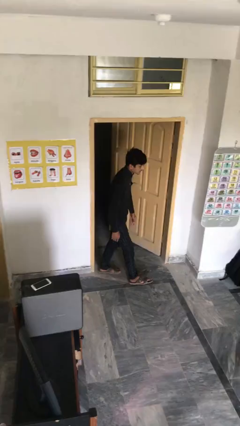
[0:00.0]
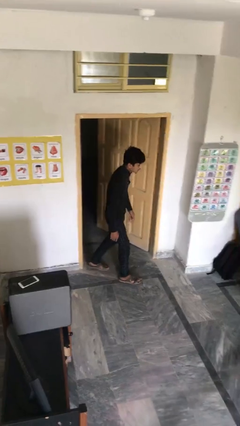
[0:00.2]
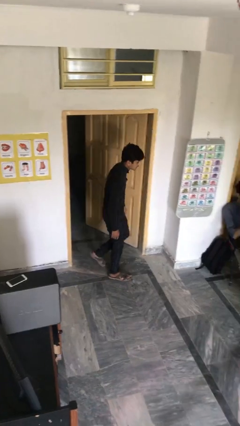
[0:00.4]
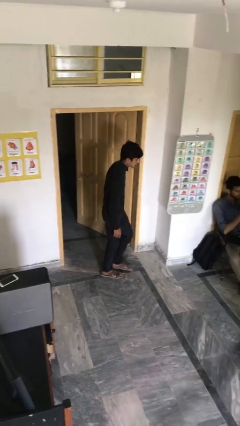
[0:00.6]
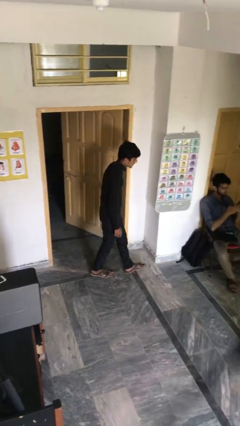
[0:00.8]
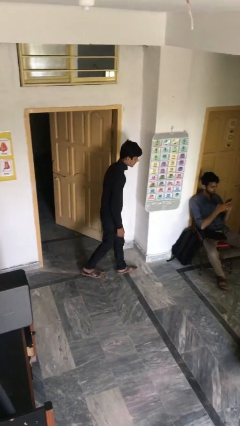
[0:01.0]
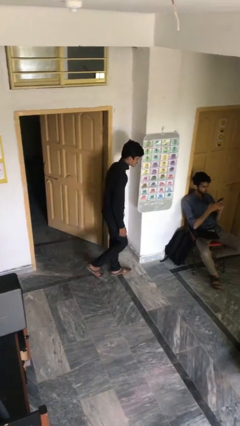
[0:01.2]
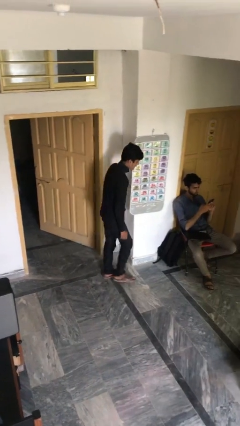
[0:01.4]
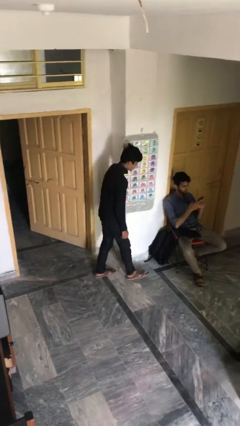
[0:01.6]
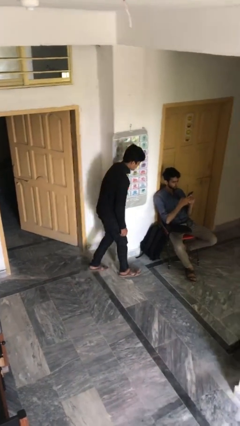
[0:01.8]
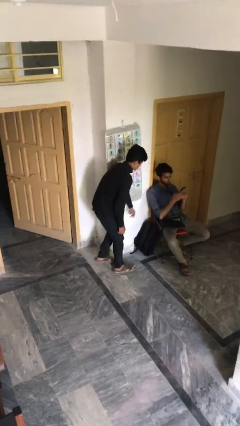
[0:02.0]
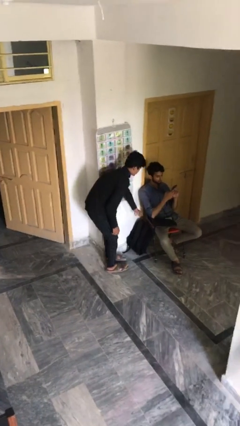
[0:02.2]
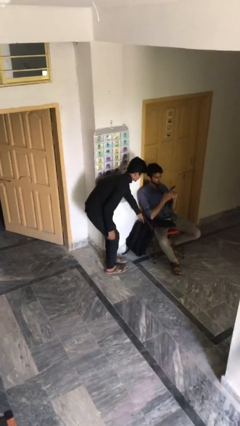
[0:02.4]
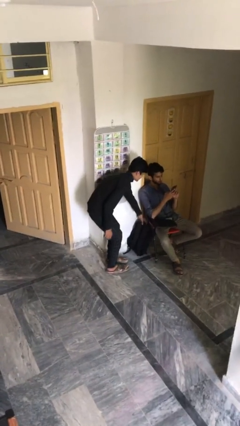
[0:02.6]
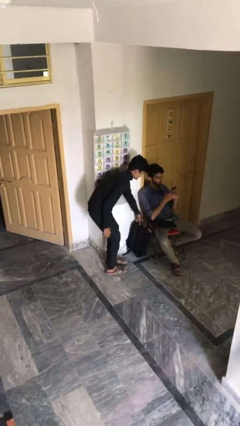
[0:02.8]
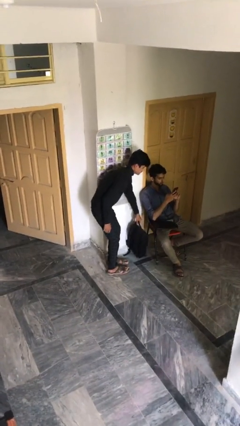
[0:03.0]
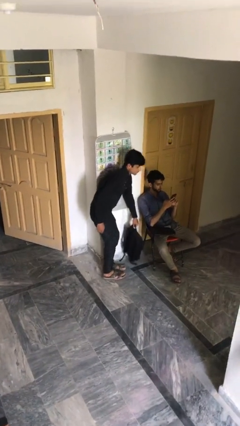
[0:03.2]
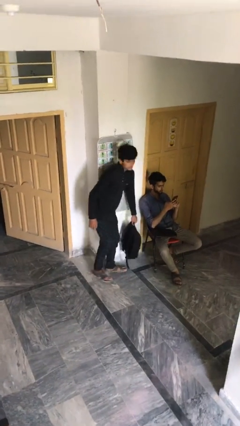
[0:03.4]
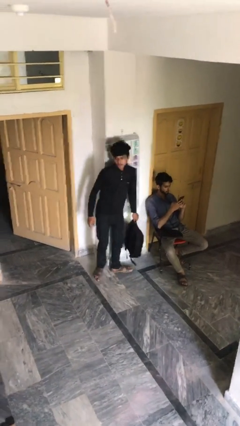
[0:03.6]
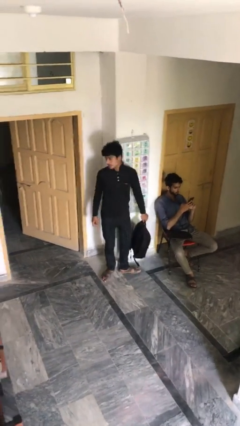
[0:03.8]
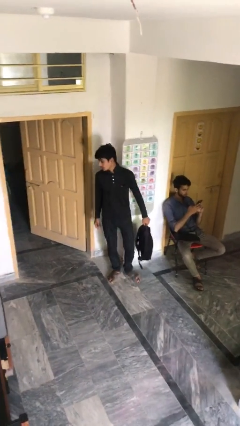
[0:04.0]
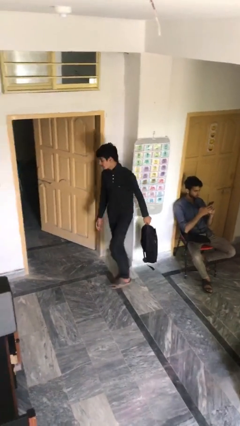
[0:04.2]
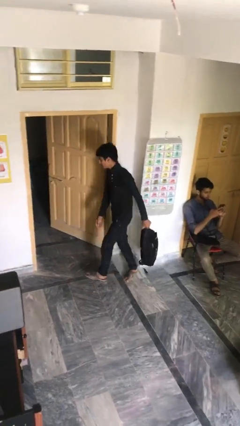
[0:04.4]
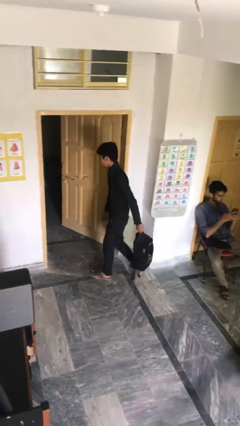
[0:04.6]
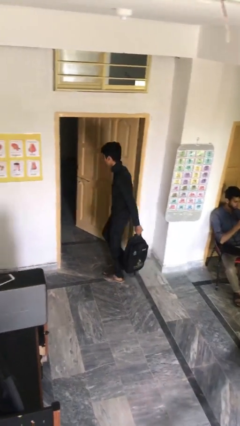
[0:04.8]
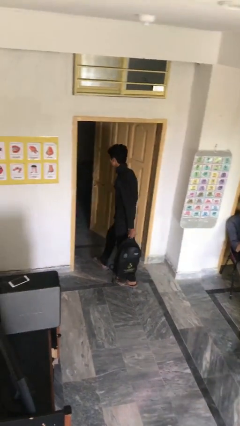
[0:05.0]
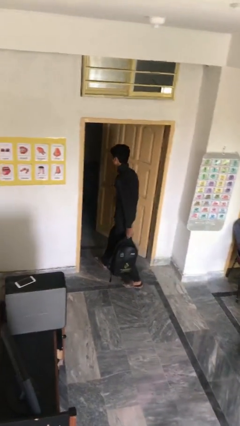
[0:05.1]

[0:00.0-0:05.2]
person steals object from person

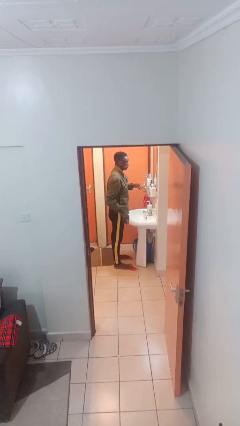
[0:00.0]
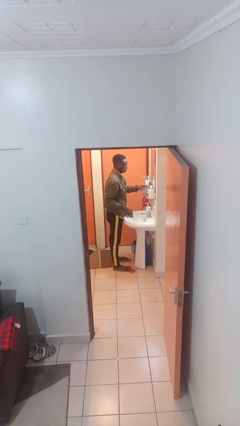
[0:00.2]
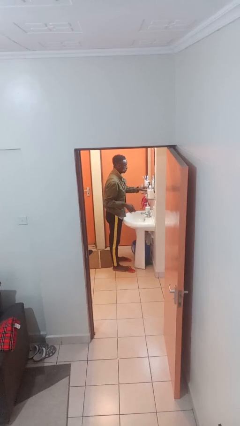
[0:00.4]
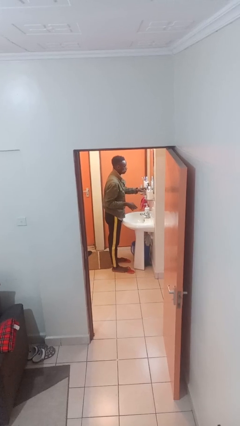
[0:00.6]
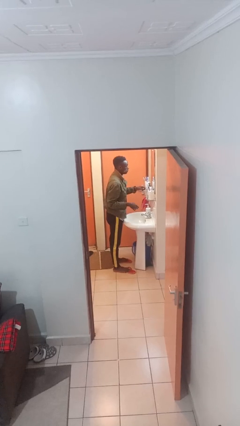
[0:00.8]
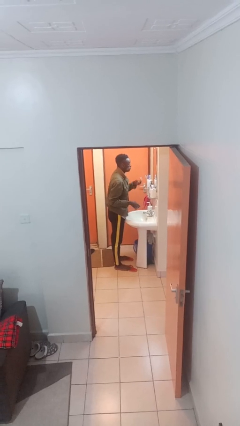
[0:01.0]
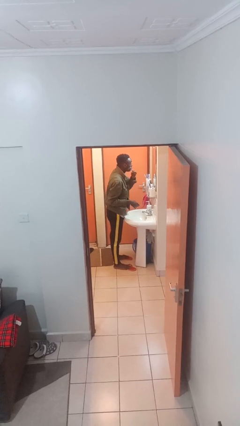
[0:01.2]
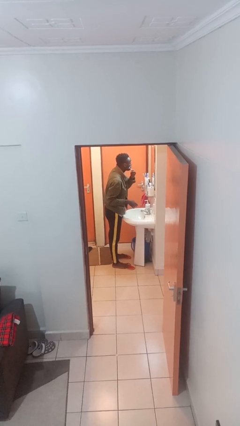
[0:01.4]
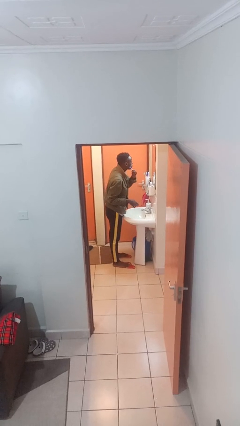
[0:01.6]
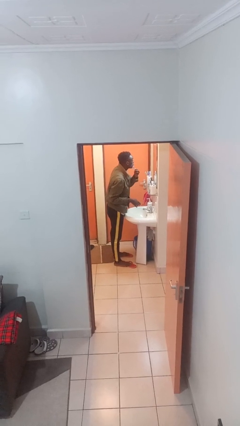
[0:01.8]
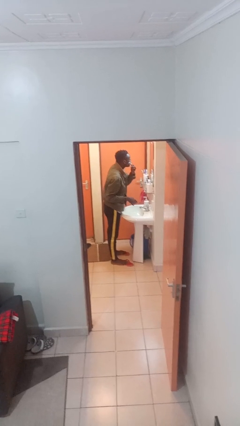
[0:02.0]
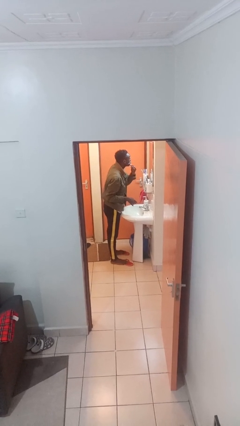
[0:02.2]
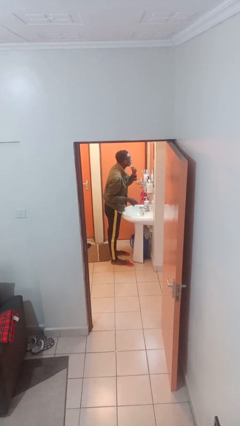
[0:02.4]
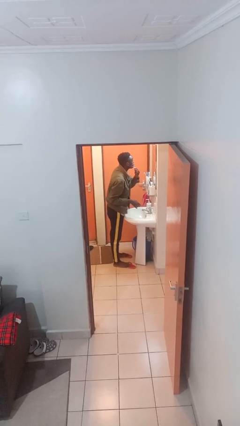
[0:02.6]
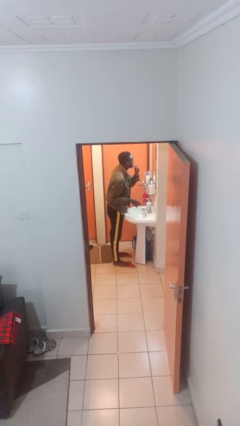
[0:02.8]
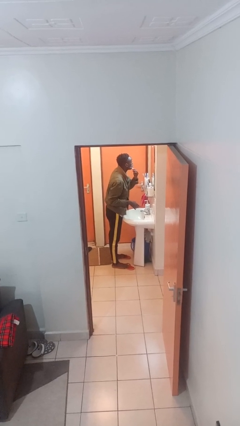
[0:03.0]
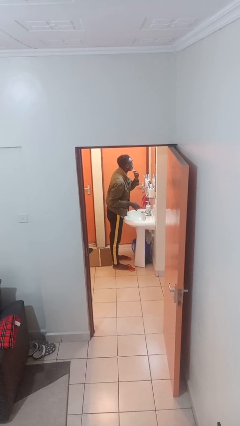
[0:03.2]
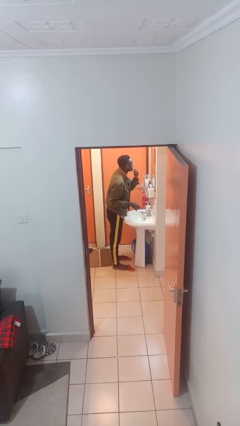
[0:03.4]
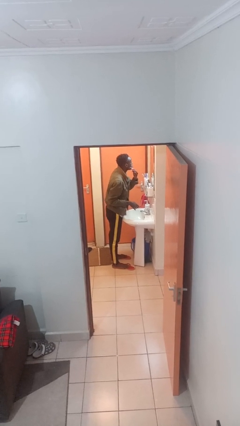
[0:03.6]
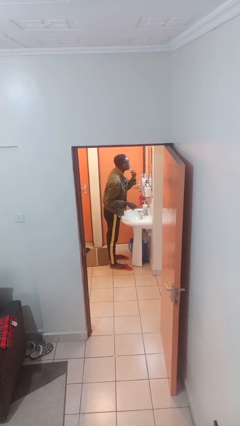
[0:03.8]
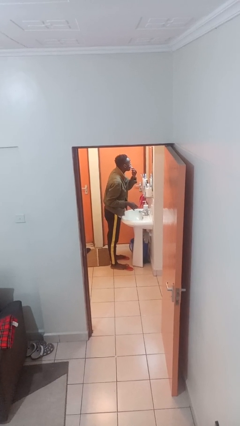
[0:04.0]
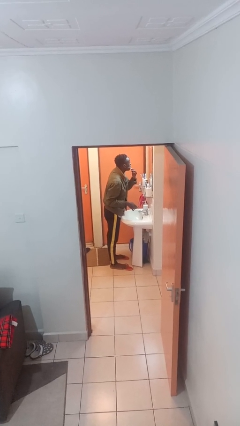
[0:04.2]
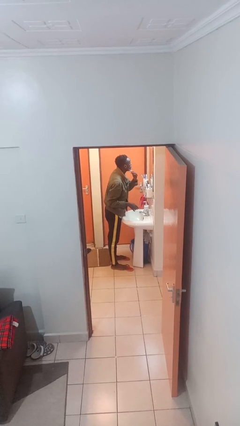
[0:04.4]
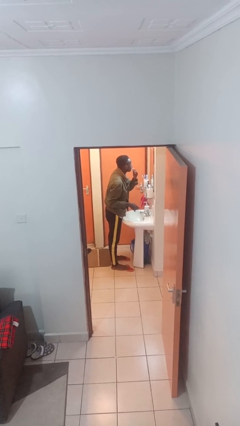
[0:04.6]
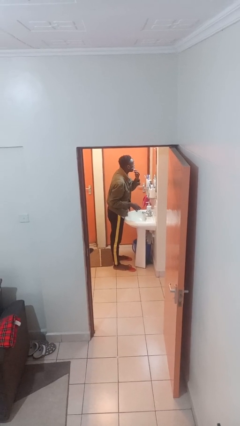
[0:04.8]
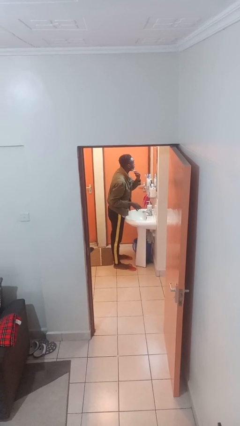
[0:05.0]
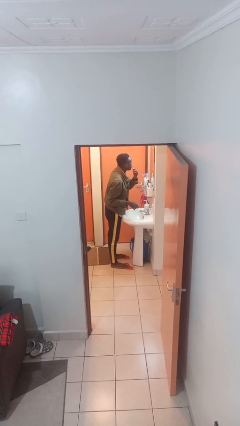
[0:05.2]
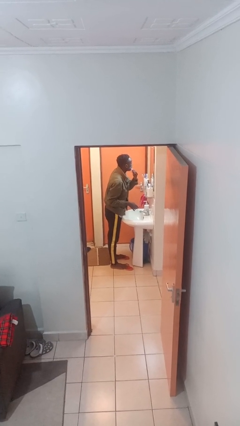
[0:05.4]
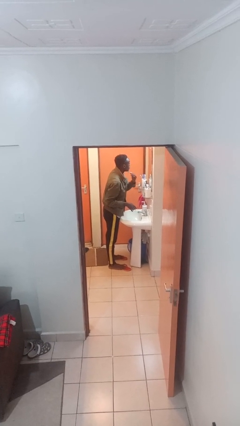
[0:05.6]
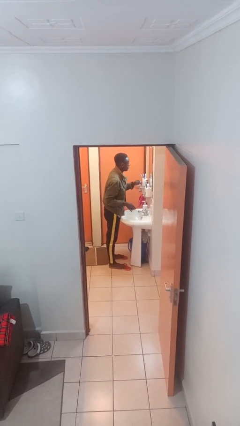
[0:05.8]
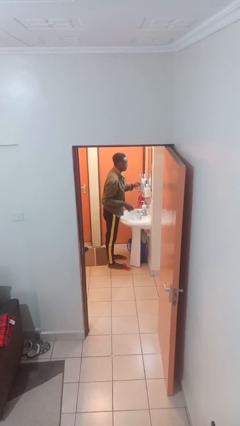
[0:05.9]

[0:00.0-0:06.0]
person shaves face

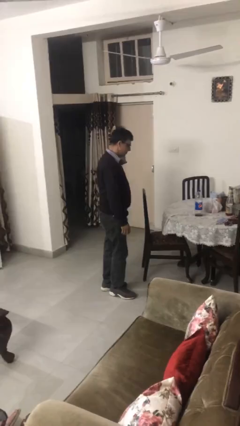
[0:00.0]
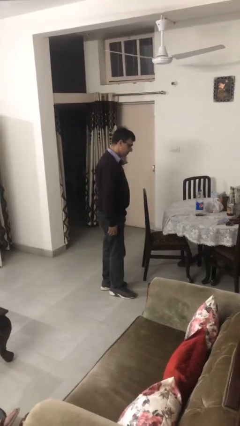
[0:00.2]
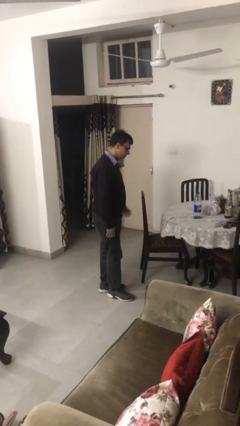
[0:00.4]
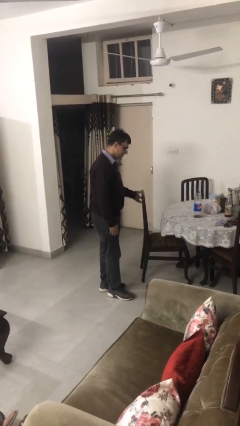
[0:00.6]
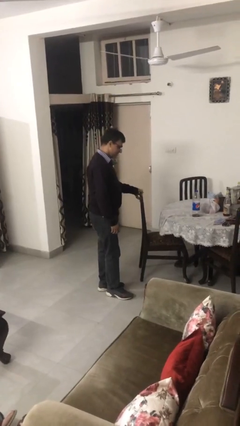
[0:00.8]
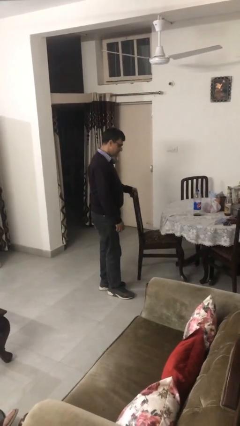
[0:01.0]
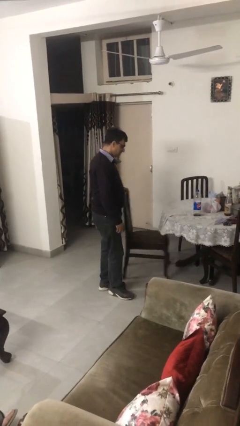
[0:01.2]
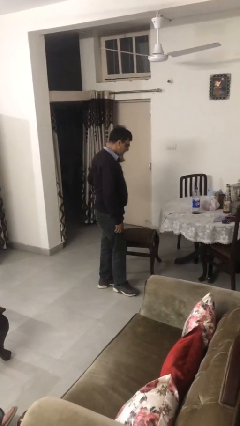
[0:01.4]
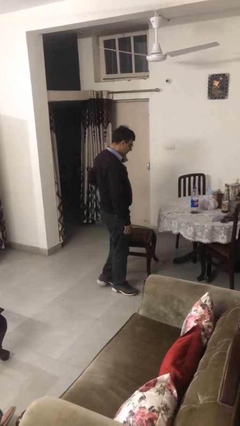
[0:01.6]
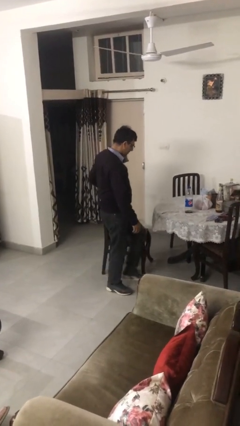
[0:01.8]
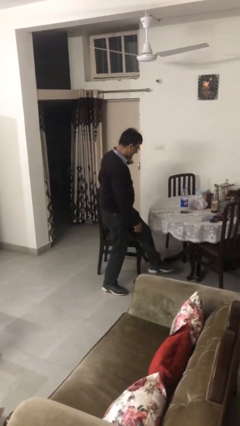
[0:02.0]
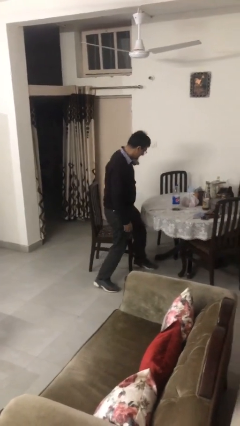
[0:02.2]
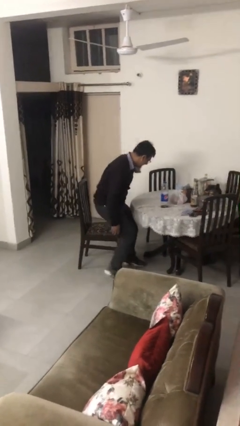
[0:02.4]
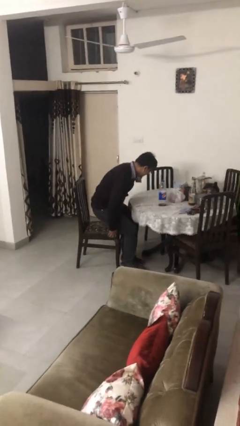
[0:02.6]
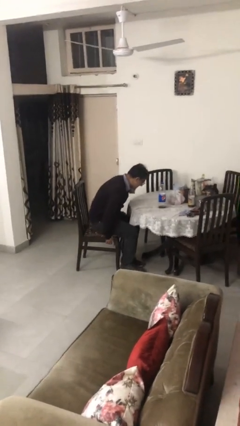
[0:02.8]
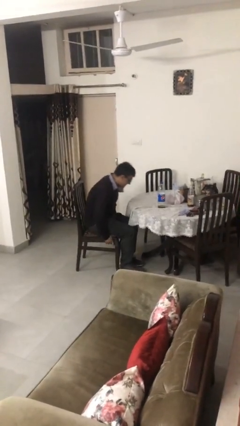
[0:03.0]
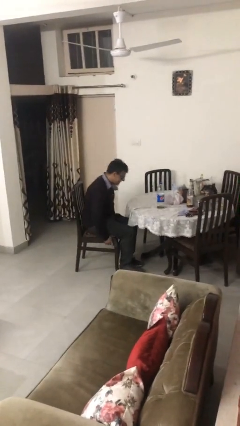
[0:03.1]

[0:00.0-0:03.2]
person sits down

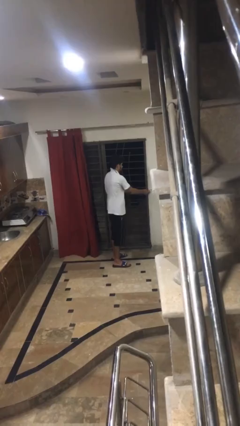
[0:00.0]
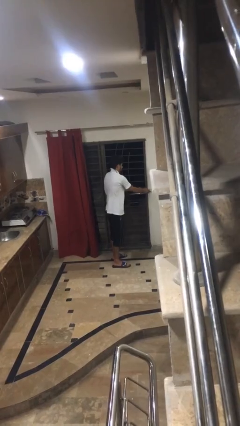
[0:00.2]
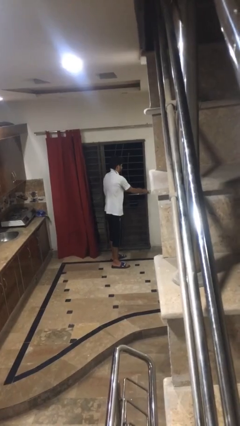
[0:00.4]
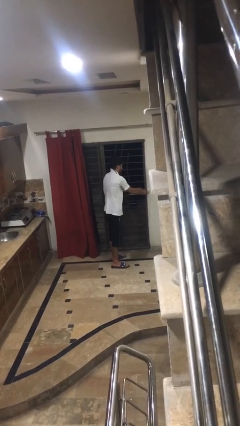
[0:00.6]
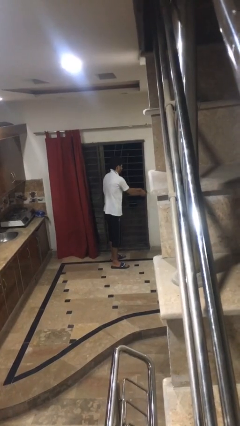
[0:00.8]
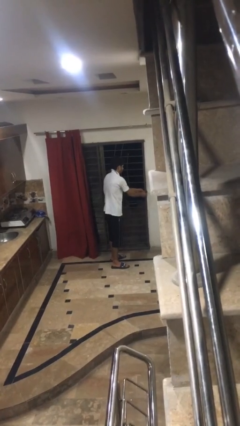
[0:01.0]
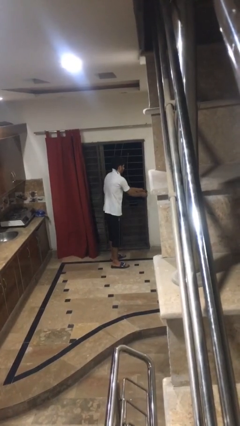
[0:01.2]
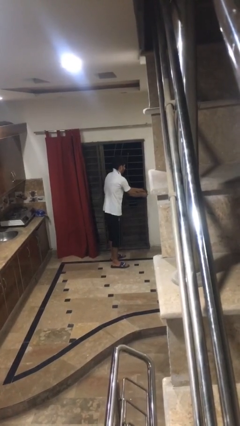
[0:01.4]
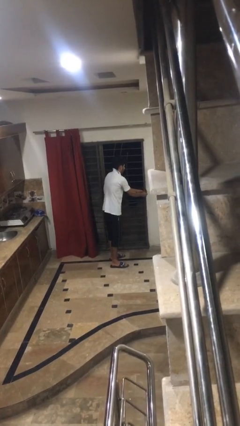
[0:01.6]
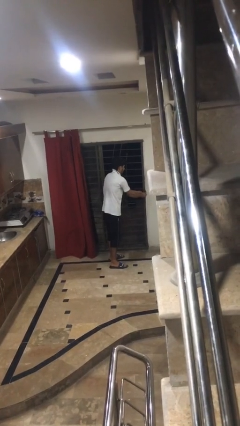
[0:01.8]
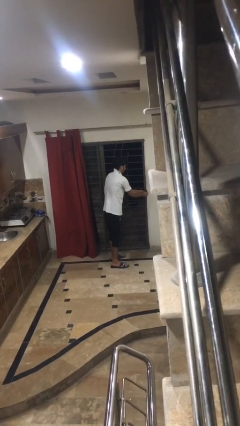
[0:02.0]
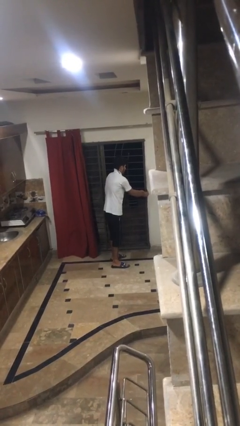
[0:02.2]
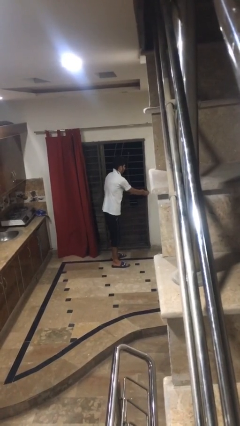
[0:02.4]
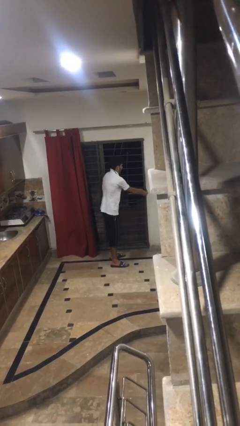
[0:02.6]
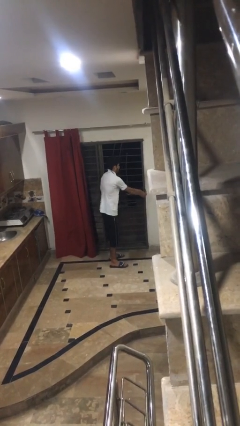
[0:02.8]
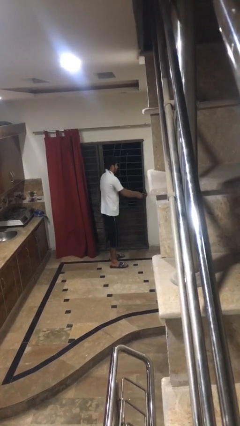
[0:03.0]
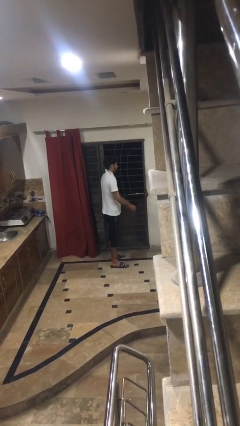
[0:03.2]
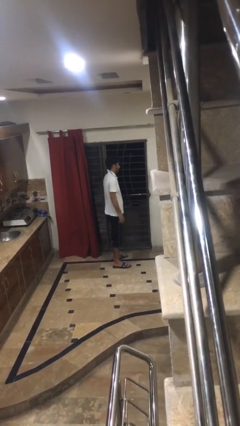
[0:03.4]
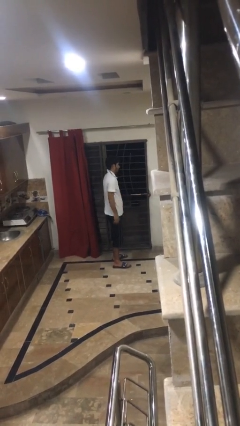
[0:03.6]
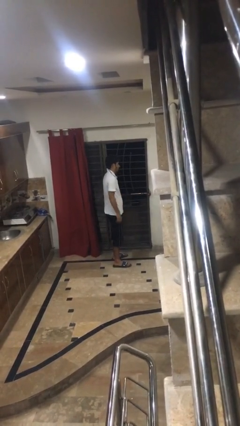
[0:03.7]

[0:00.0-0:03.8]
person locks door with keys
